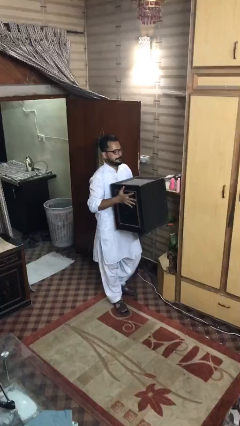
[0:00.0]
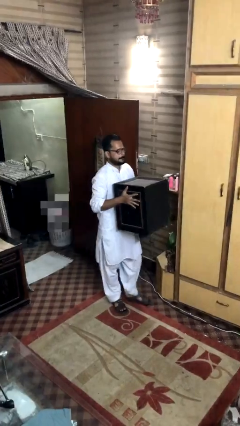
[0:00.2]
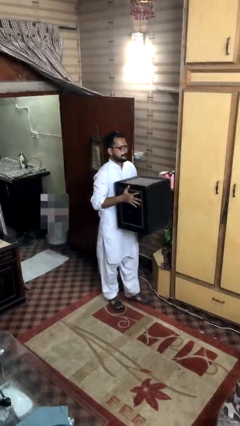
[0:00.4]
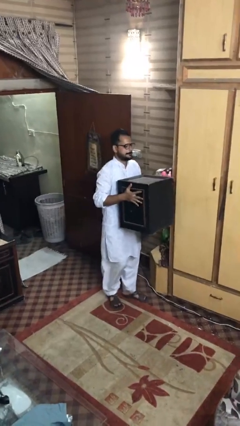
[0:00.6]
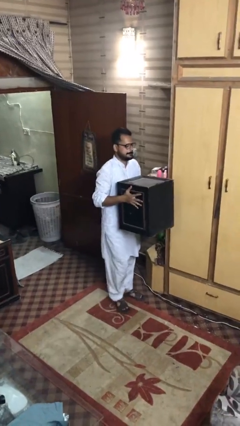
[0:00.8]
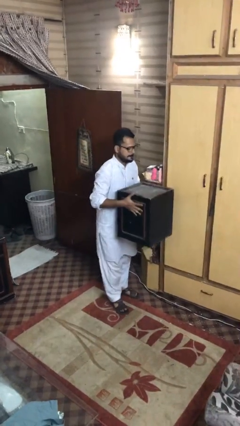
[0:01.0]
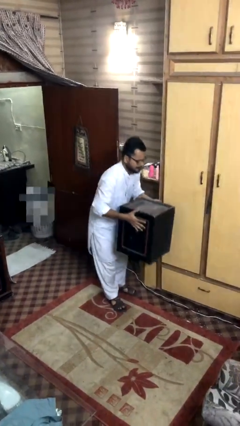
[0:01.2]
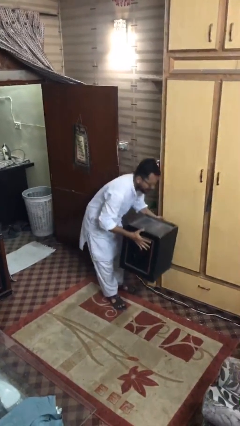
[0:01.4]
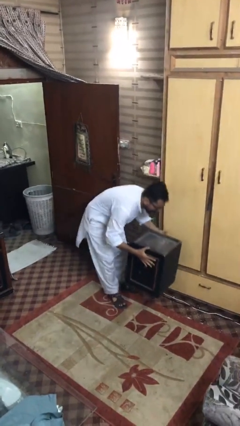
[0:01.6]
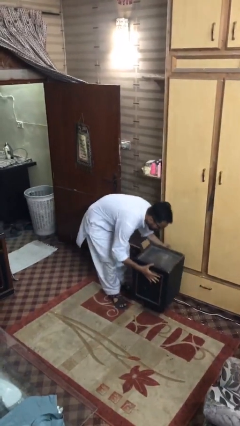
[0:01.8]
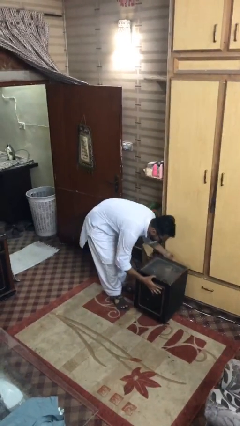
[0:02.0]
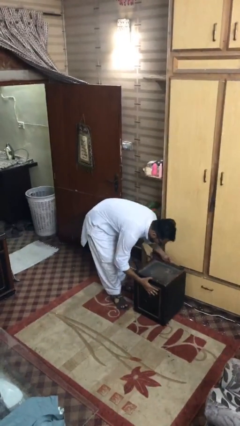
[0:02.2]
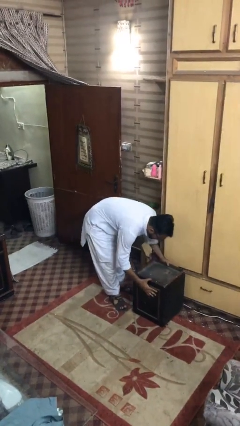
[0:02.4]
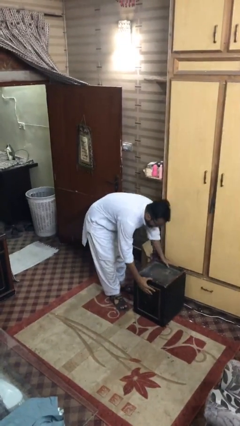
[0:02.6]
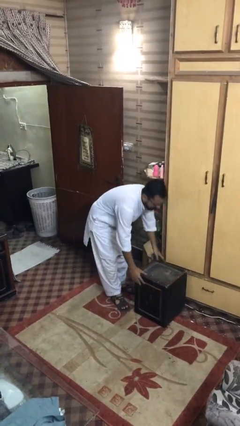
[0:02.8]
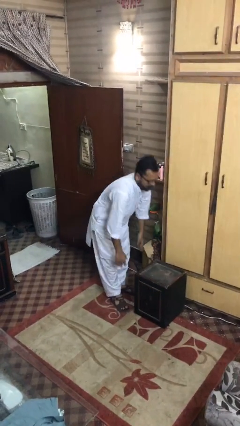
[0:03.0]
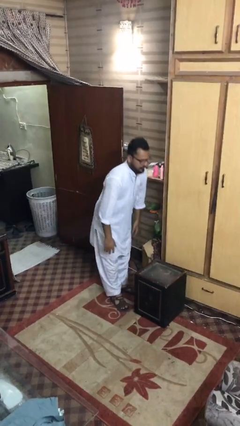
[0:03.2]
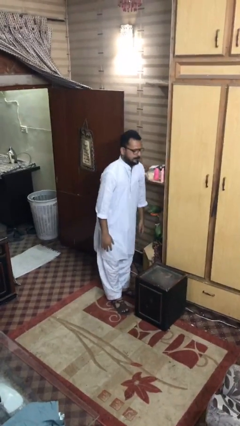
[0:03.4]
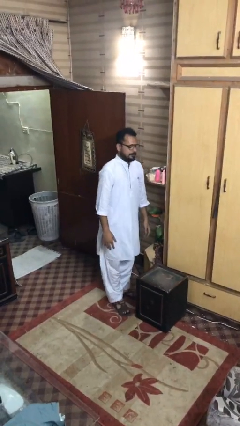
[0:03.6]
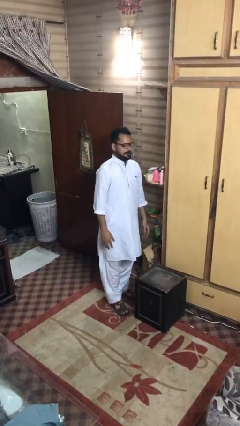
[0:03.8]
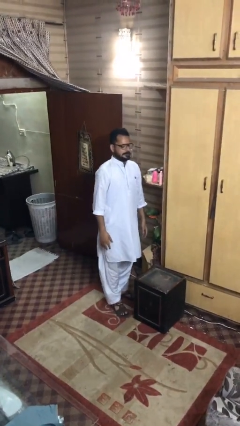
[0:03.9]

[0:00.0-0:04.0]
person puts down object on floor

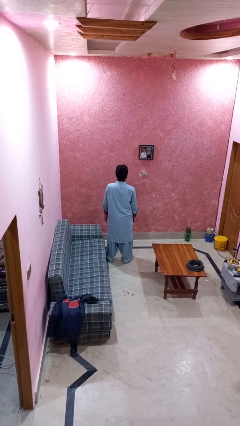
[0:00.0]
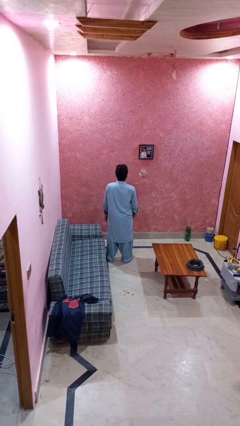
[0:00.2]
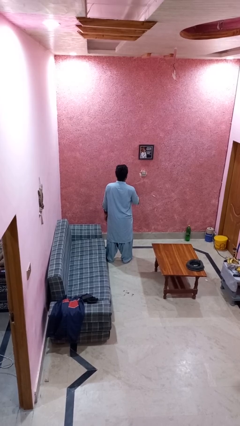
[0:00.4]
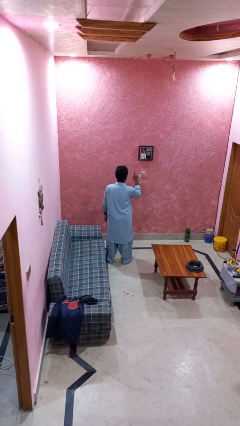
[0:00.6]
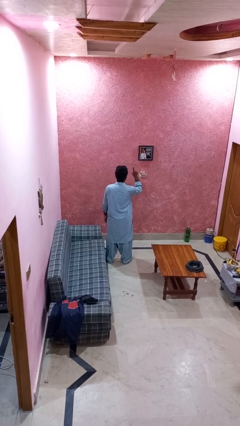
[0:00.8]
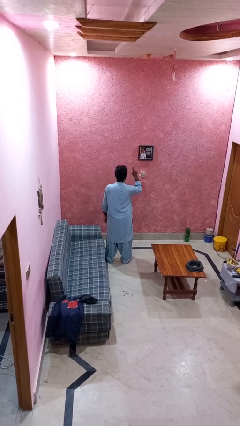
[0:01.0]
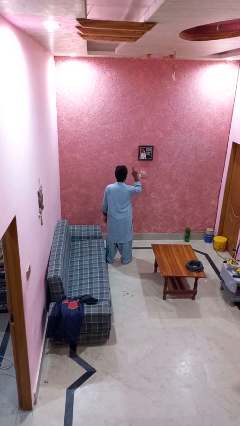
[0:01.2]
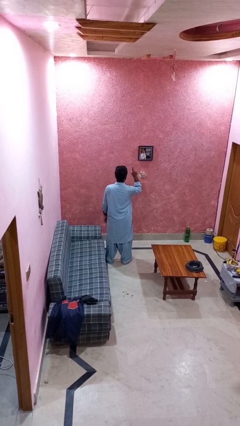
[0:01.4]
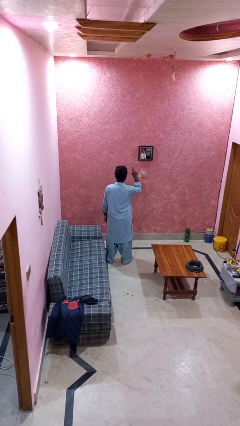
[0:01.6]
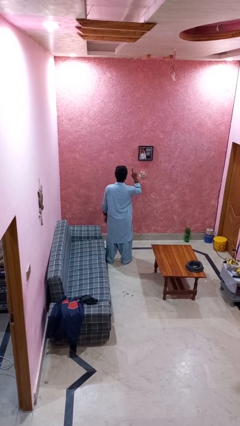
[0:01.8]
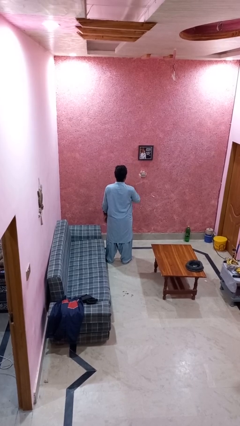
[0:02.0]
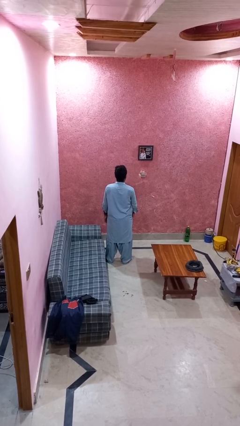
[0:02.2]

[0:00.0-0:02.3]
person gestures number one

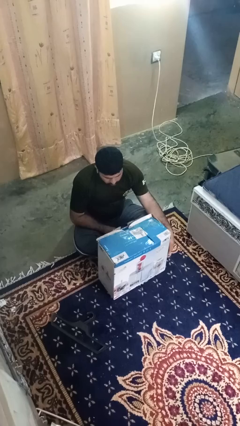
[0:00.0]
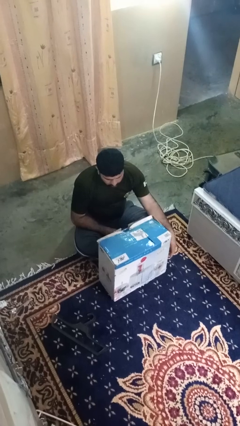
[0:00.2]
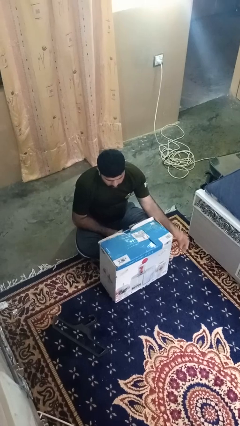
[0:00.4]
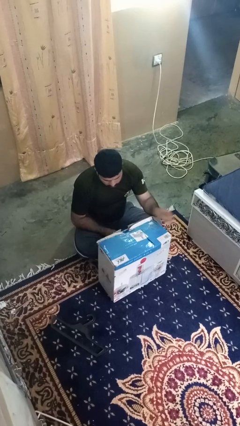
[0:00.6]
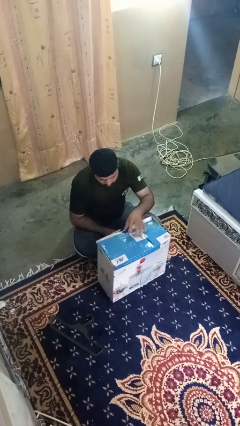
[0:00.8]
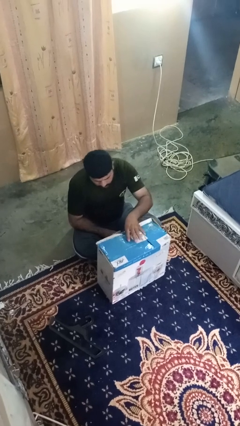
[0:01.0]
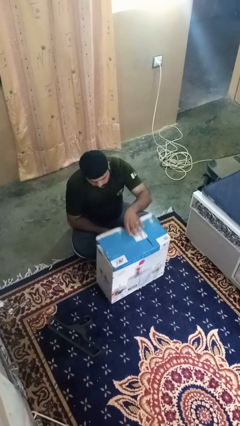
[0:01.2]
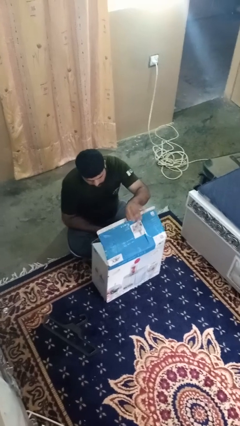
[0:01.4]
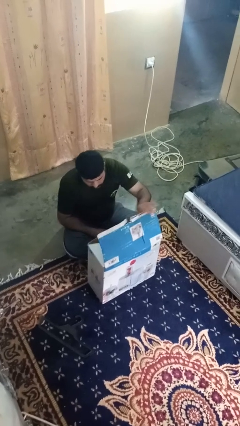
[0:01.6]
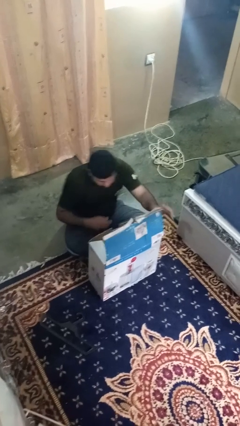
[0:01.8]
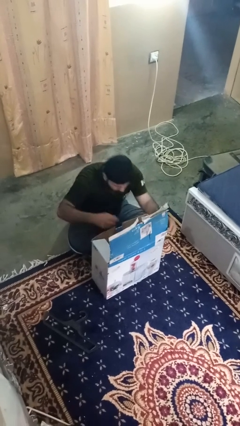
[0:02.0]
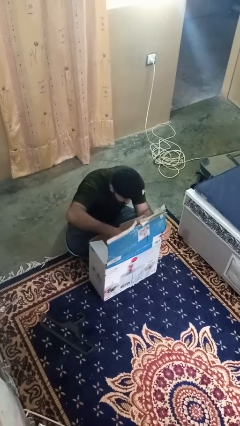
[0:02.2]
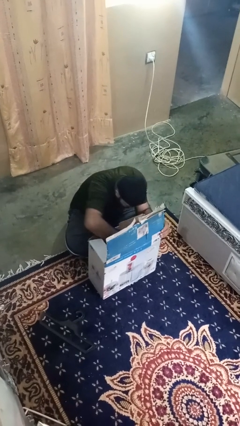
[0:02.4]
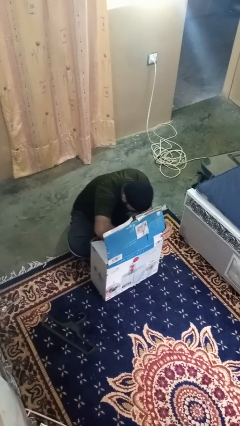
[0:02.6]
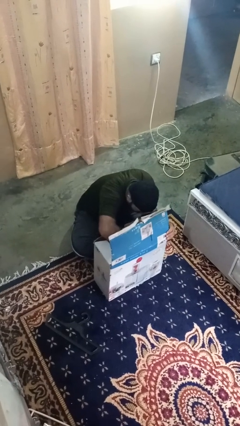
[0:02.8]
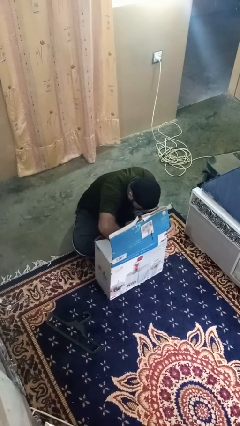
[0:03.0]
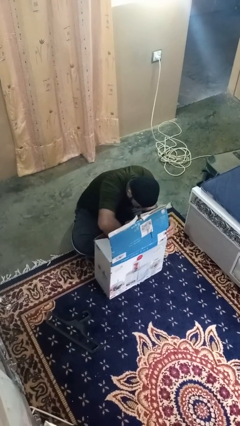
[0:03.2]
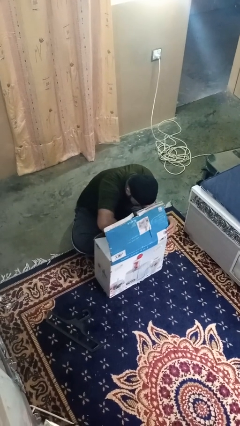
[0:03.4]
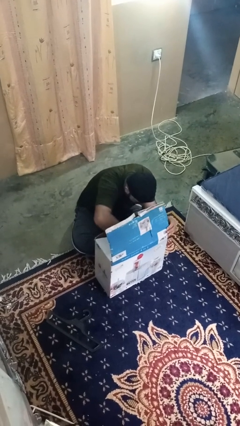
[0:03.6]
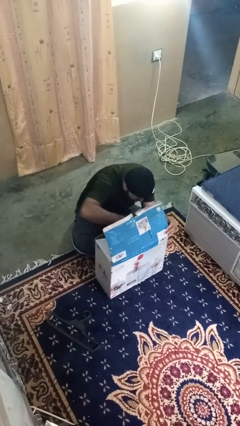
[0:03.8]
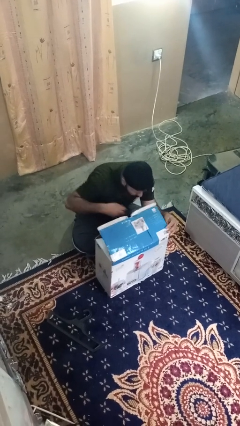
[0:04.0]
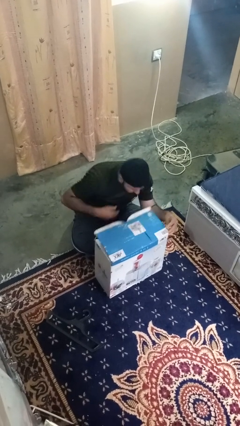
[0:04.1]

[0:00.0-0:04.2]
person searches in box

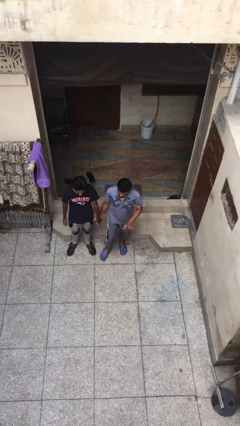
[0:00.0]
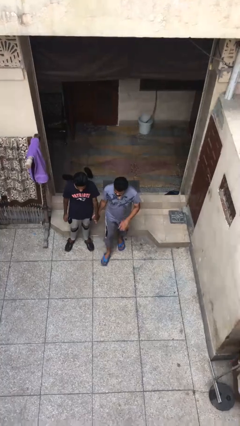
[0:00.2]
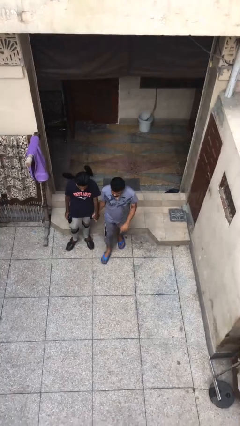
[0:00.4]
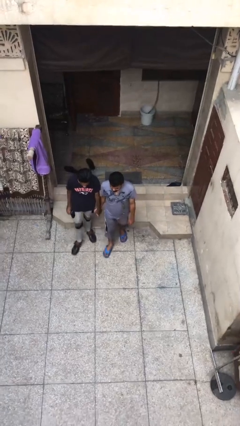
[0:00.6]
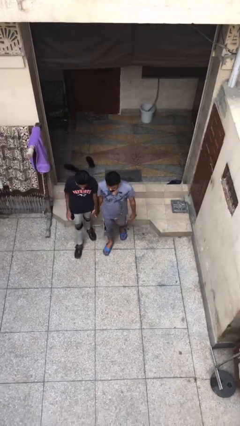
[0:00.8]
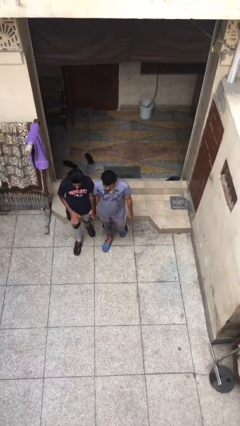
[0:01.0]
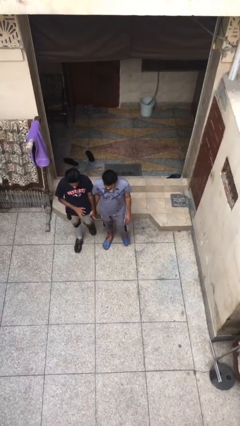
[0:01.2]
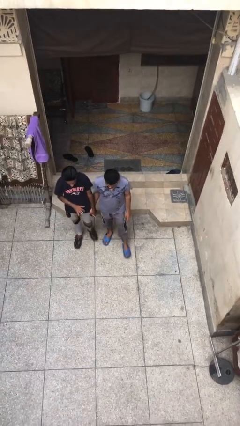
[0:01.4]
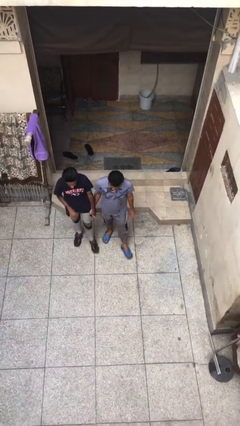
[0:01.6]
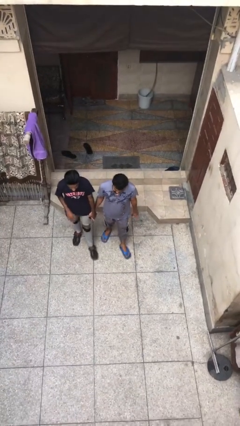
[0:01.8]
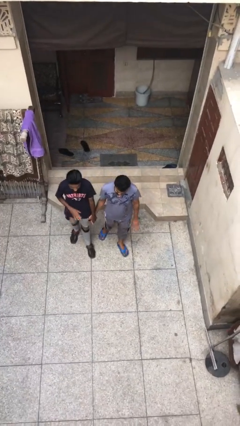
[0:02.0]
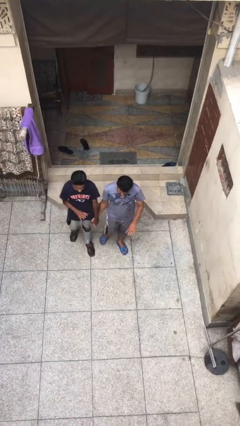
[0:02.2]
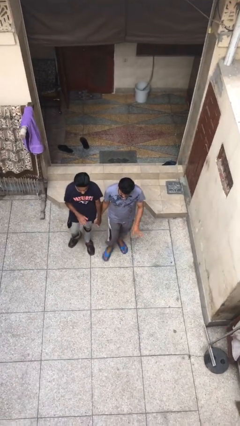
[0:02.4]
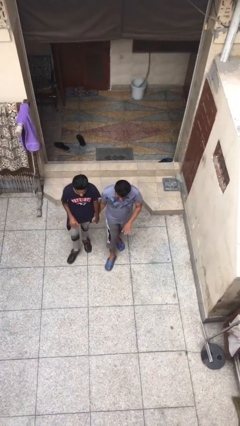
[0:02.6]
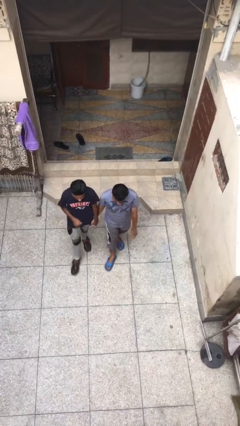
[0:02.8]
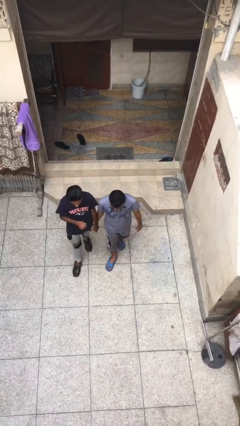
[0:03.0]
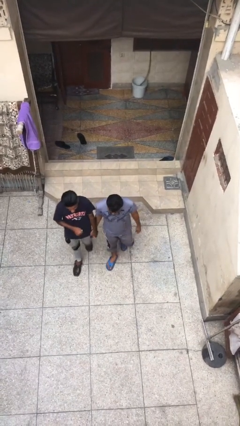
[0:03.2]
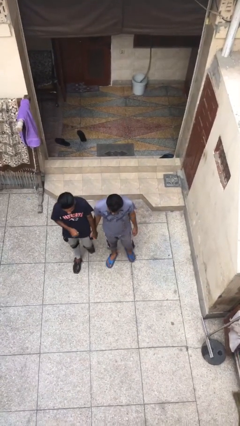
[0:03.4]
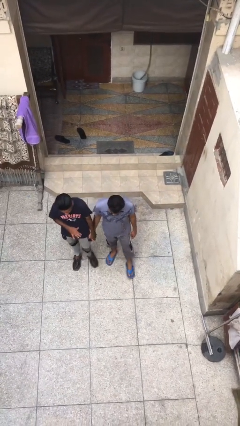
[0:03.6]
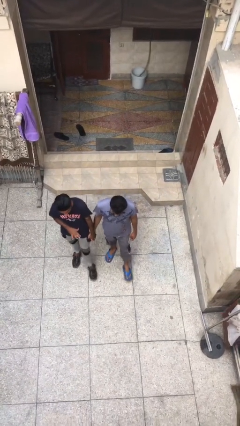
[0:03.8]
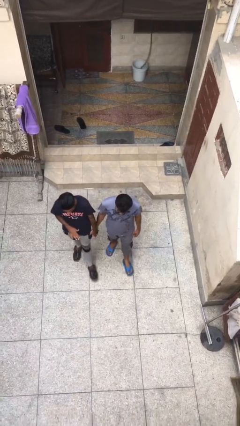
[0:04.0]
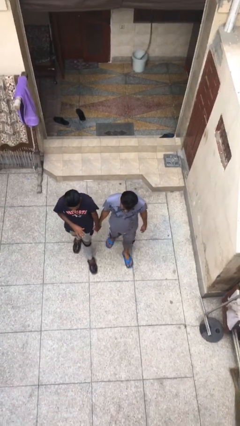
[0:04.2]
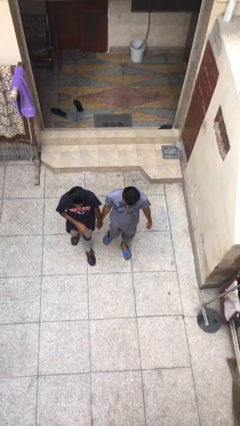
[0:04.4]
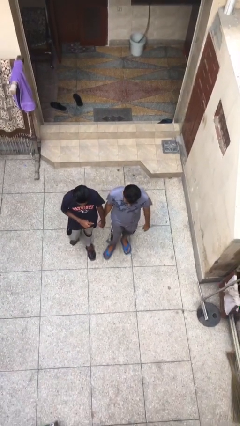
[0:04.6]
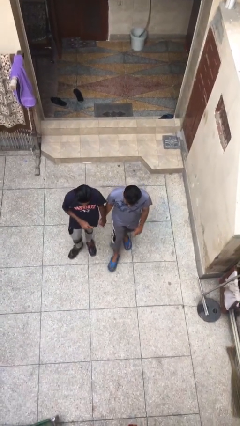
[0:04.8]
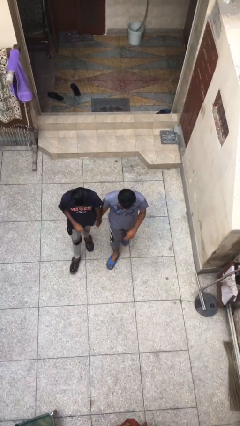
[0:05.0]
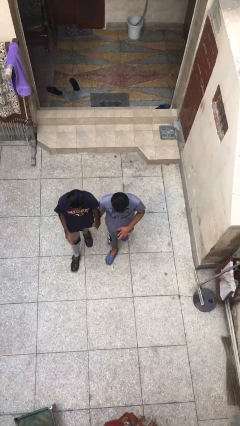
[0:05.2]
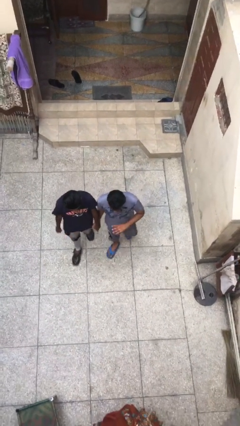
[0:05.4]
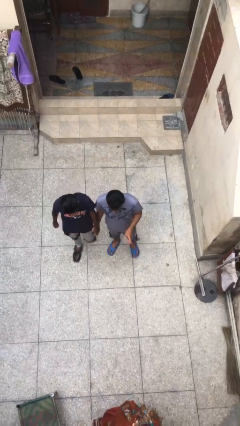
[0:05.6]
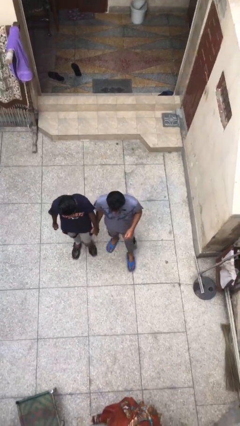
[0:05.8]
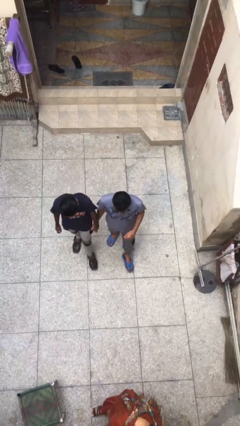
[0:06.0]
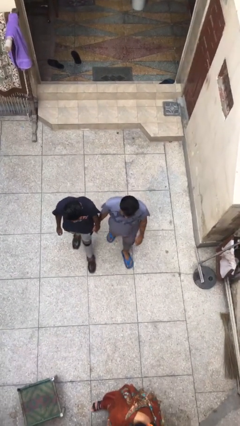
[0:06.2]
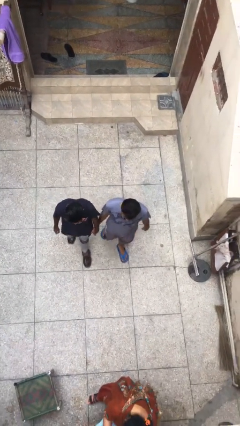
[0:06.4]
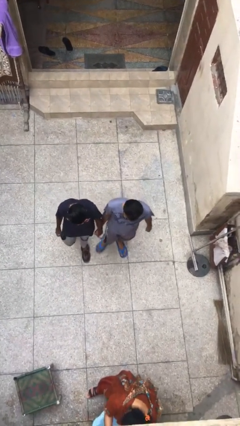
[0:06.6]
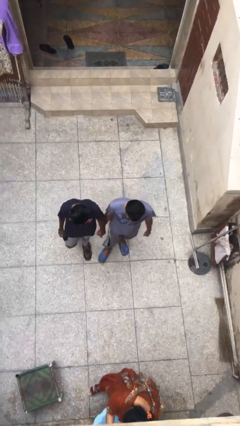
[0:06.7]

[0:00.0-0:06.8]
person holds hand

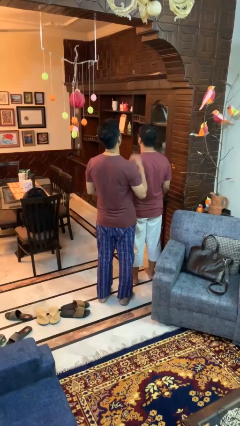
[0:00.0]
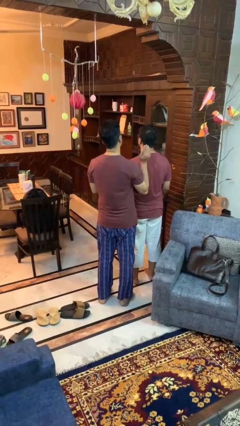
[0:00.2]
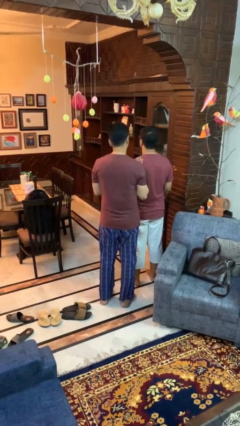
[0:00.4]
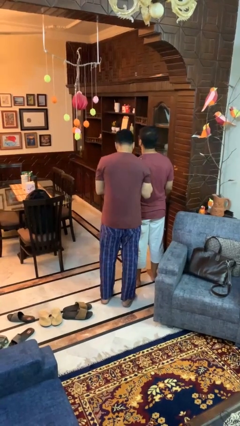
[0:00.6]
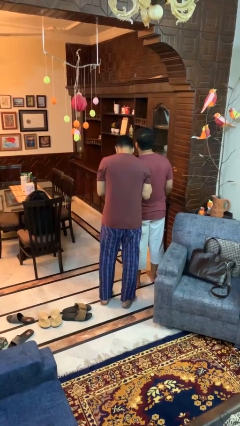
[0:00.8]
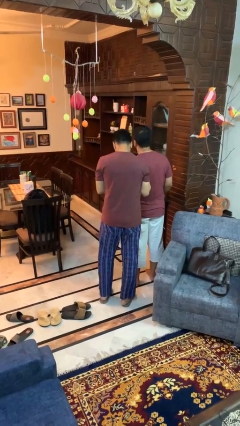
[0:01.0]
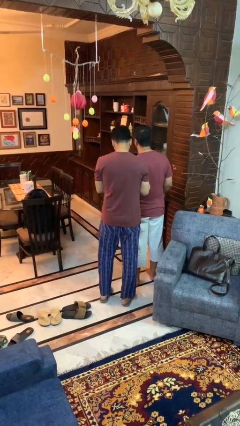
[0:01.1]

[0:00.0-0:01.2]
person shoves person
